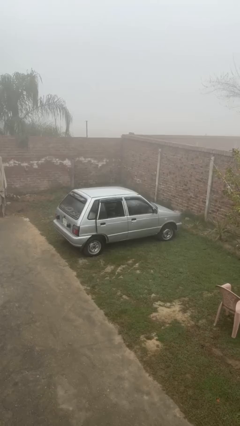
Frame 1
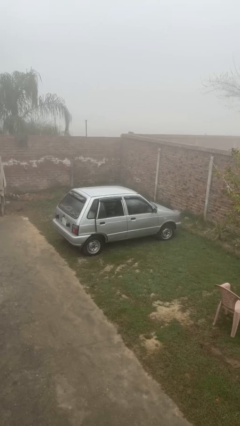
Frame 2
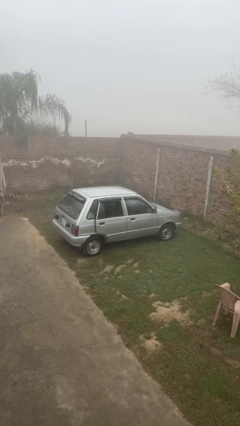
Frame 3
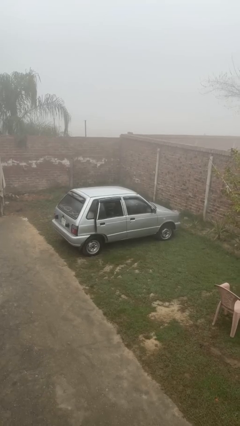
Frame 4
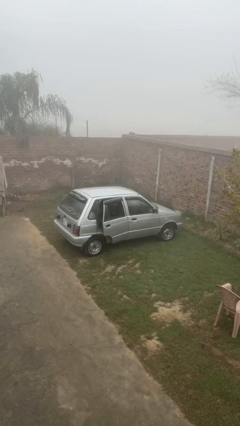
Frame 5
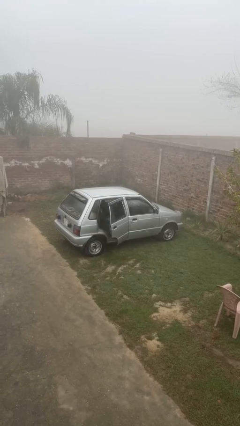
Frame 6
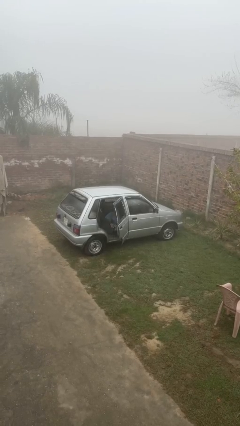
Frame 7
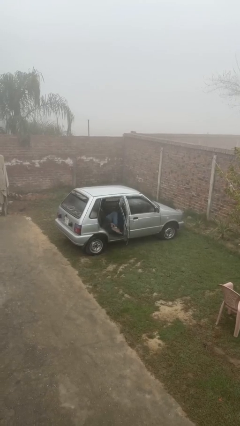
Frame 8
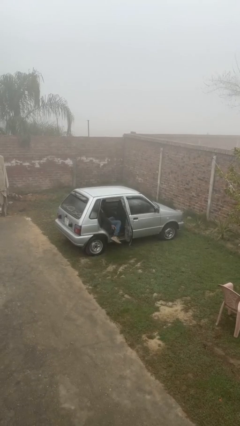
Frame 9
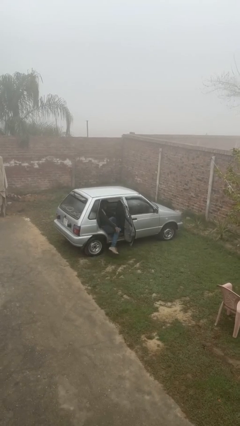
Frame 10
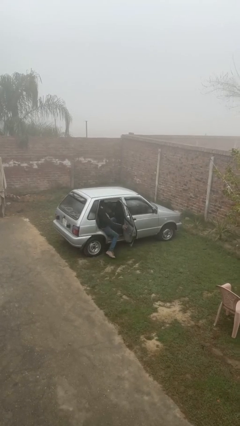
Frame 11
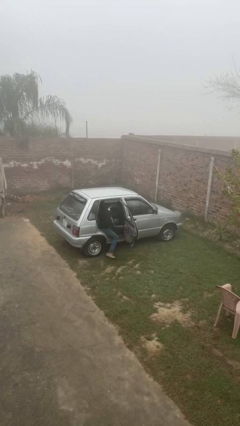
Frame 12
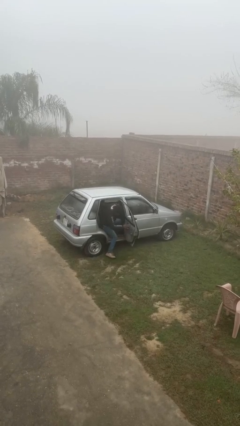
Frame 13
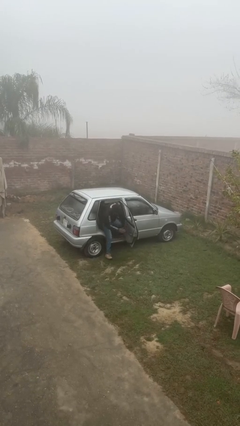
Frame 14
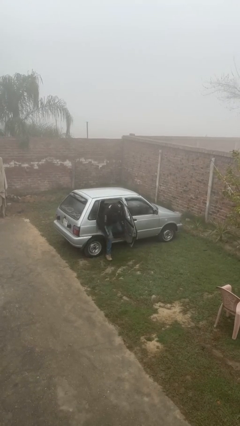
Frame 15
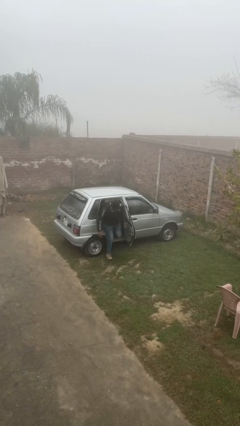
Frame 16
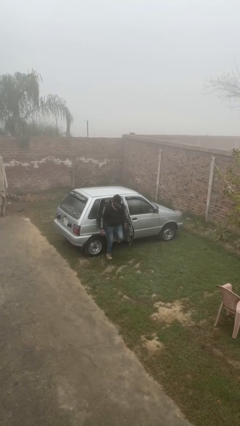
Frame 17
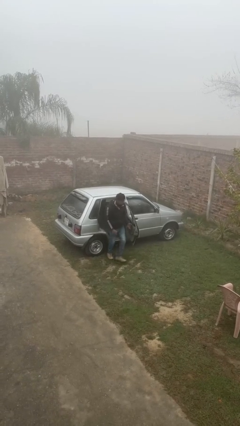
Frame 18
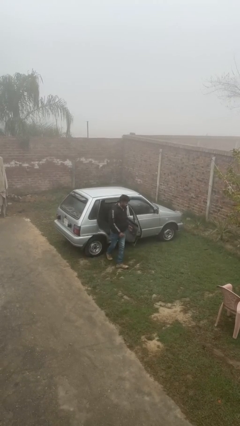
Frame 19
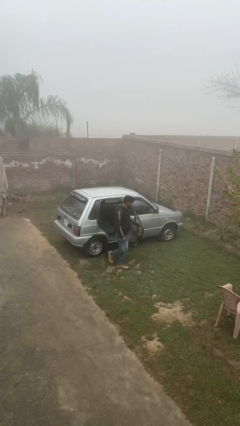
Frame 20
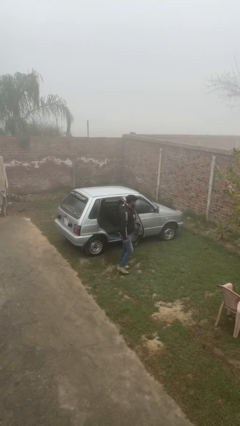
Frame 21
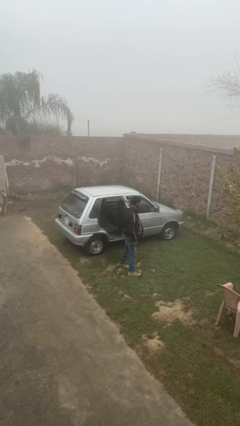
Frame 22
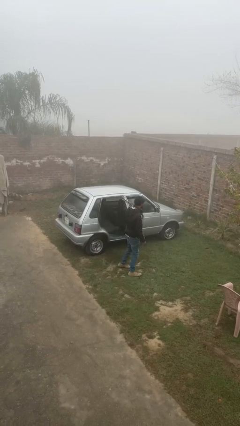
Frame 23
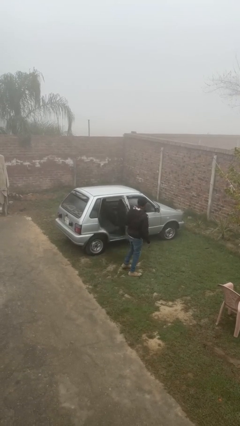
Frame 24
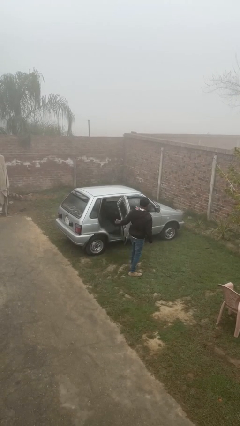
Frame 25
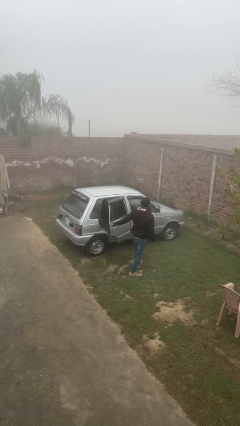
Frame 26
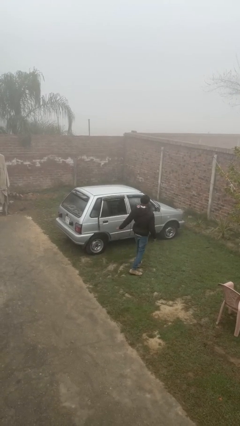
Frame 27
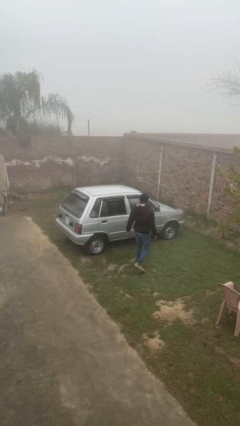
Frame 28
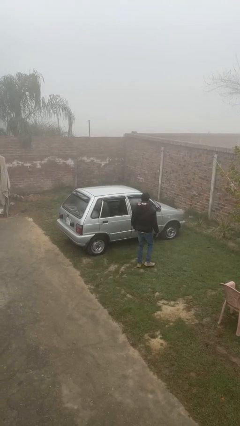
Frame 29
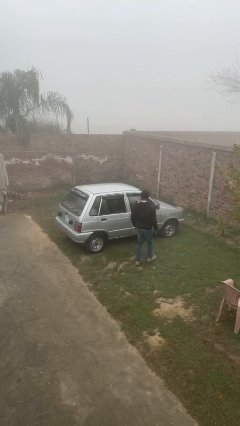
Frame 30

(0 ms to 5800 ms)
car drops off person

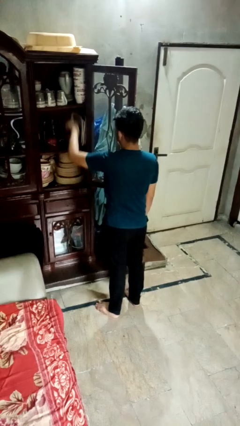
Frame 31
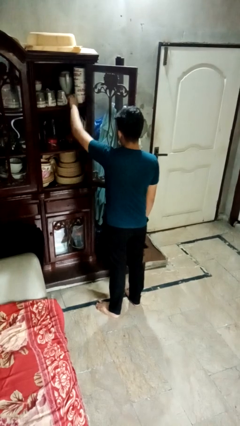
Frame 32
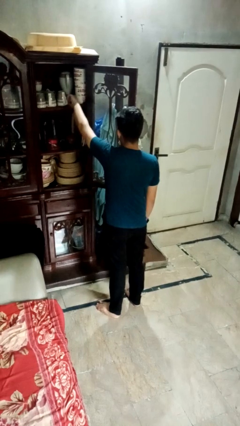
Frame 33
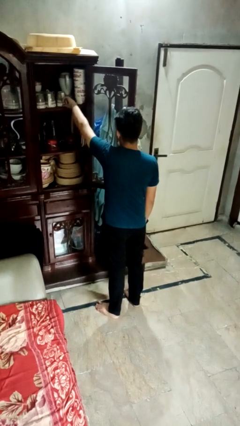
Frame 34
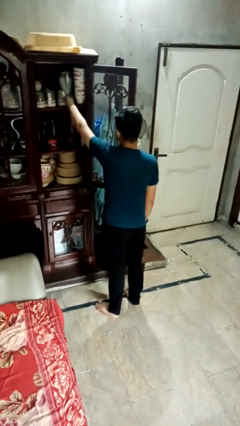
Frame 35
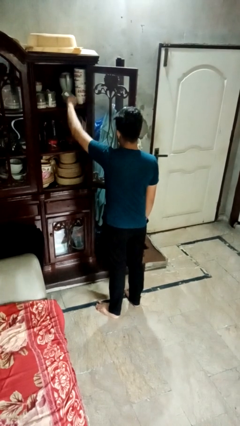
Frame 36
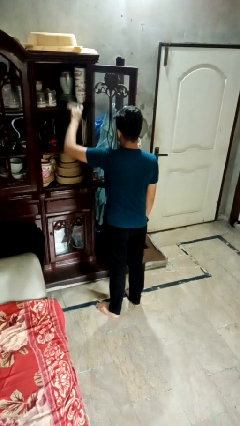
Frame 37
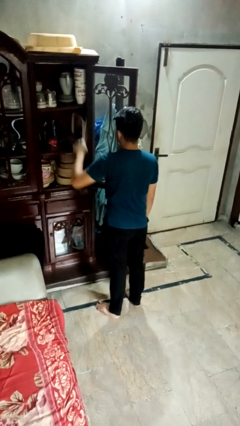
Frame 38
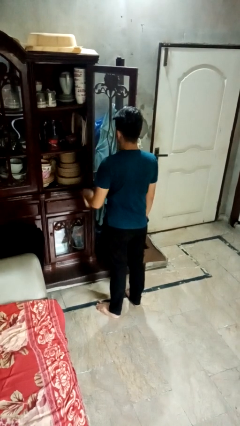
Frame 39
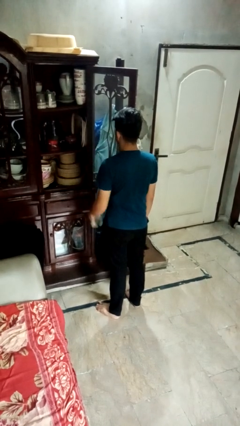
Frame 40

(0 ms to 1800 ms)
person takes object from cabinet

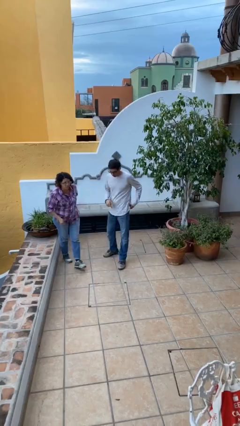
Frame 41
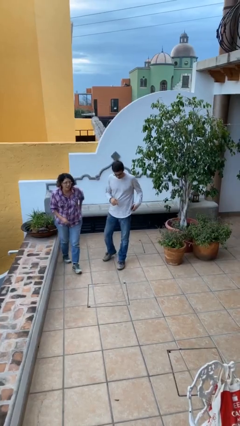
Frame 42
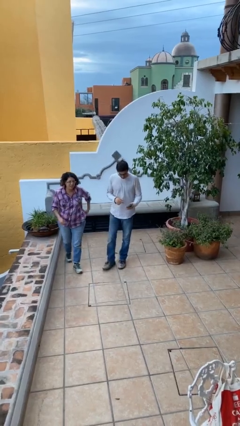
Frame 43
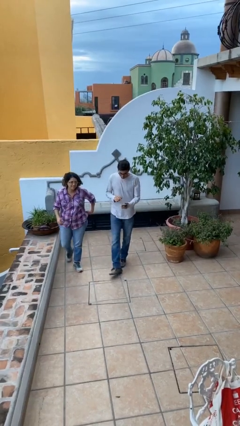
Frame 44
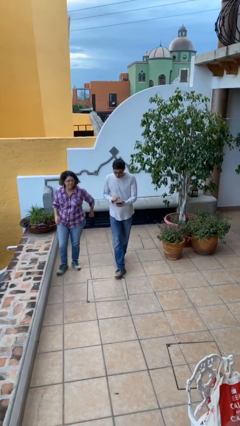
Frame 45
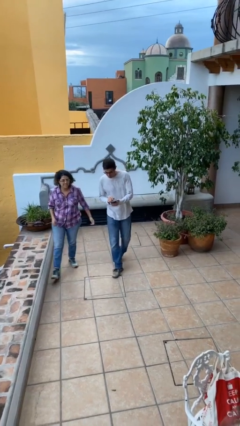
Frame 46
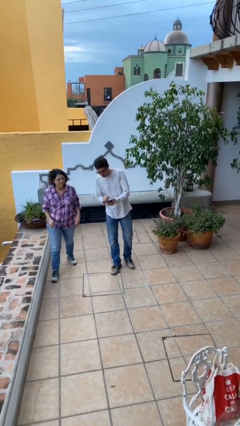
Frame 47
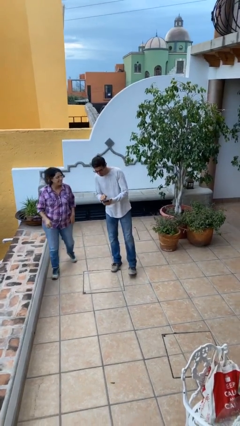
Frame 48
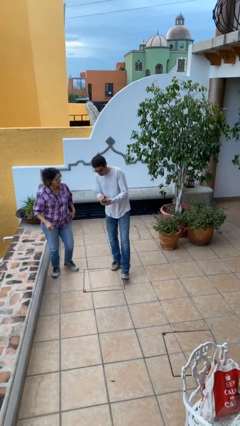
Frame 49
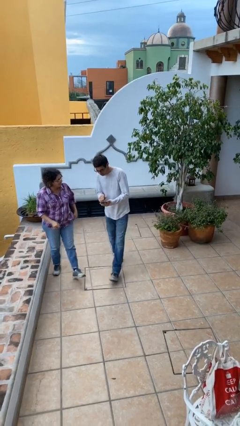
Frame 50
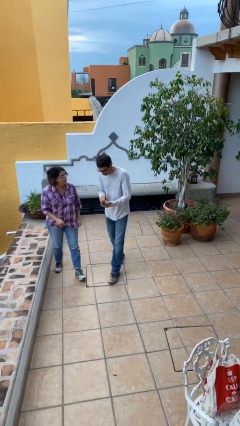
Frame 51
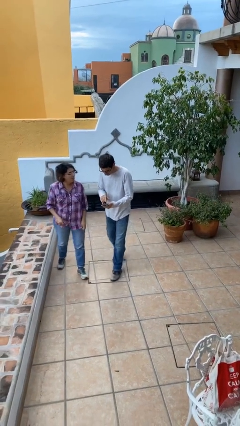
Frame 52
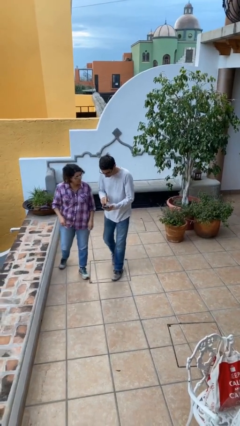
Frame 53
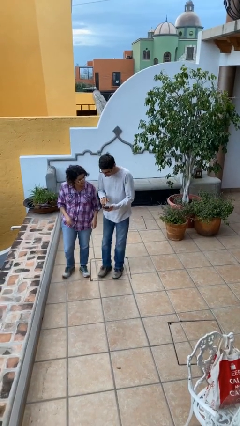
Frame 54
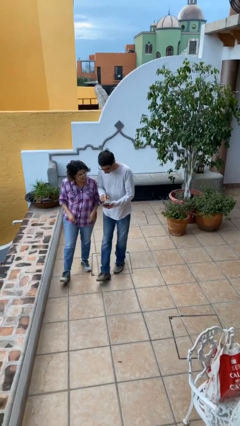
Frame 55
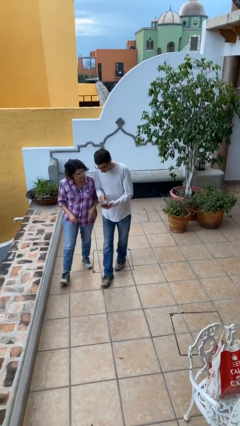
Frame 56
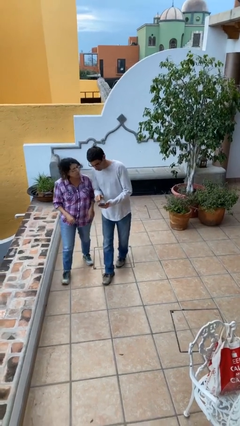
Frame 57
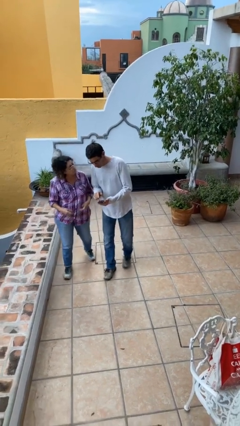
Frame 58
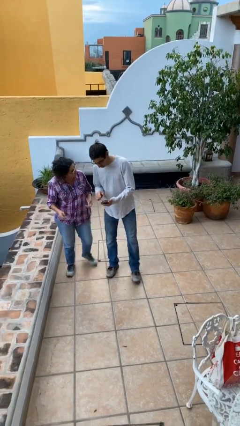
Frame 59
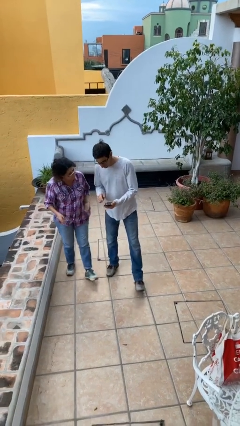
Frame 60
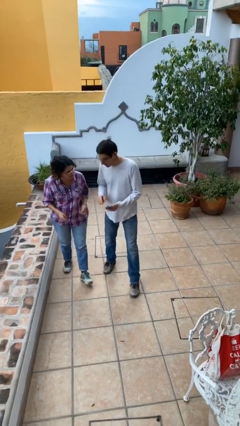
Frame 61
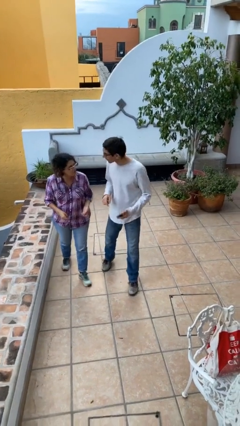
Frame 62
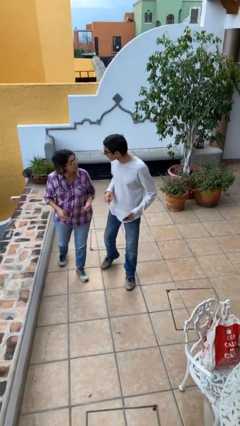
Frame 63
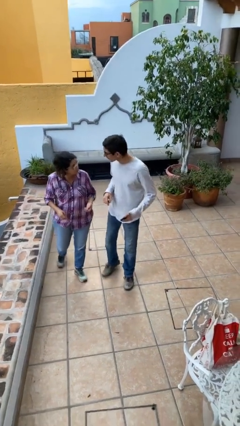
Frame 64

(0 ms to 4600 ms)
person talks to person

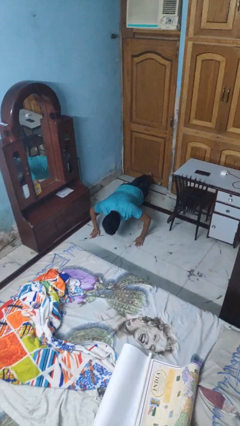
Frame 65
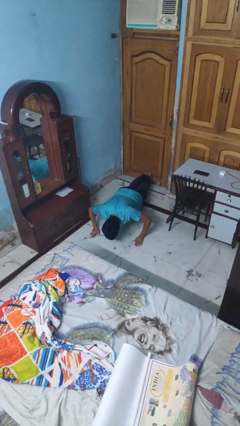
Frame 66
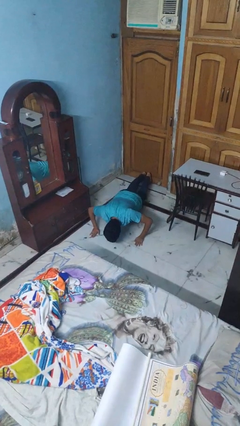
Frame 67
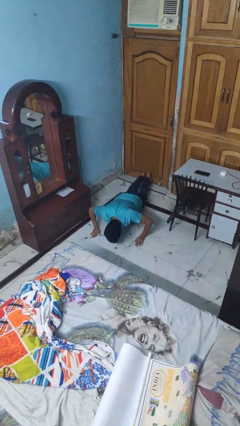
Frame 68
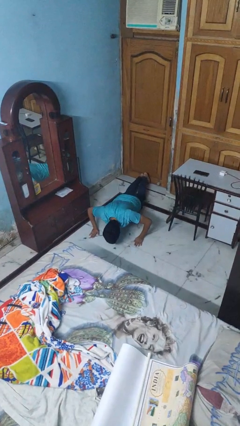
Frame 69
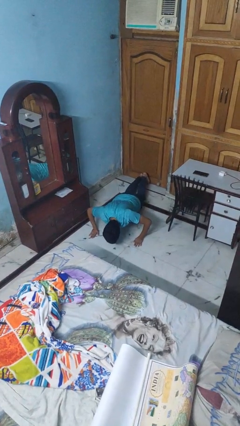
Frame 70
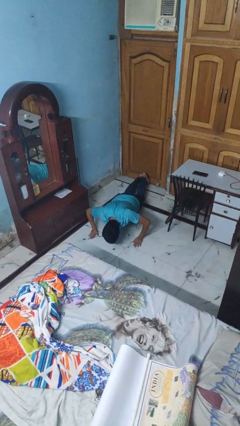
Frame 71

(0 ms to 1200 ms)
person exercises with pushup

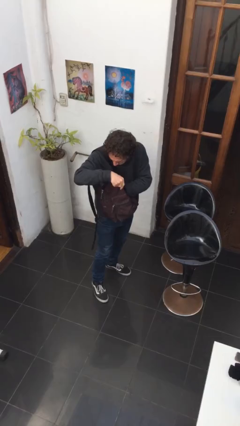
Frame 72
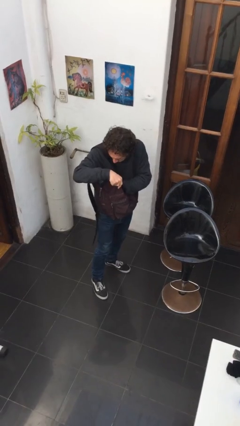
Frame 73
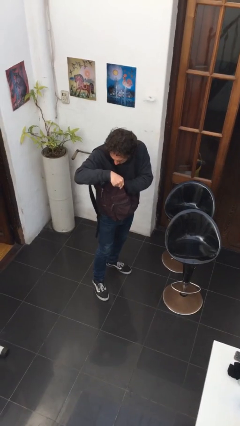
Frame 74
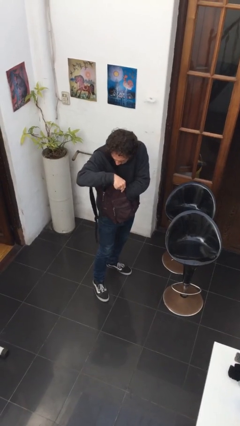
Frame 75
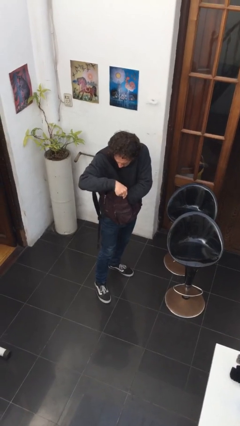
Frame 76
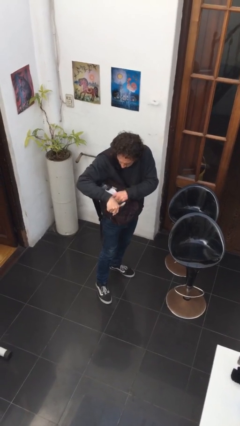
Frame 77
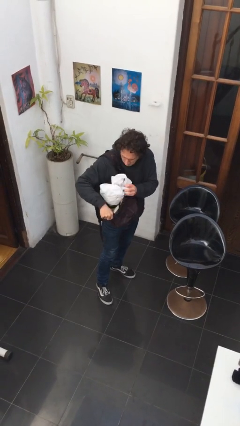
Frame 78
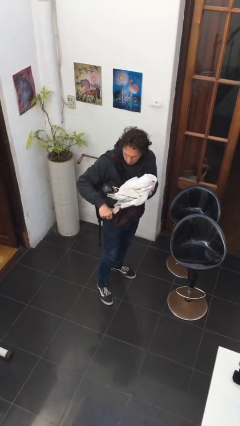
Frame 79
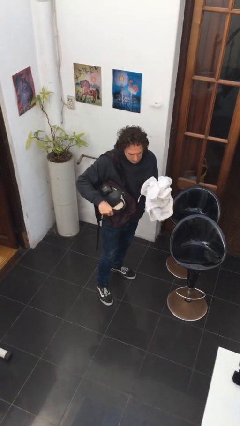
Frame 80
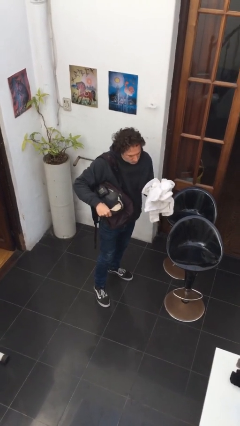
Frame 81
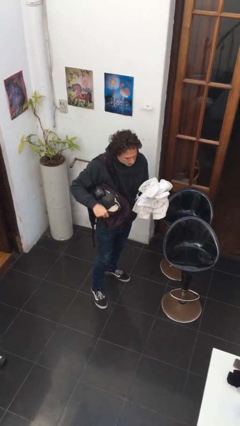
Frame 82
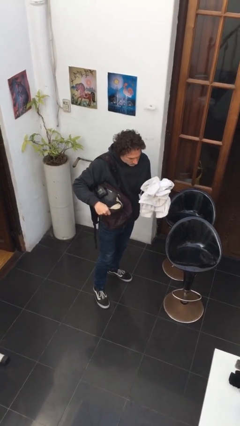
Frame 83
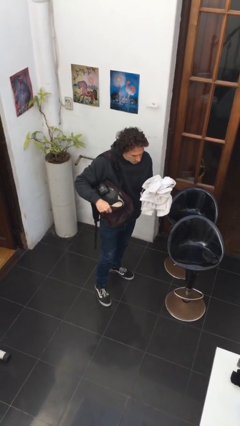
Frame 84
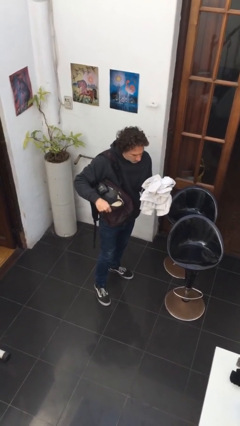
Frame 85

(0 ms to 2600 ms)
person takes object from backpack

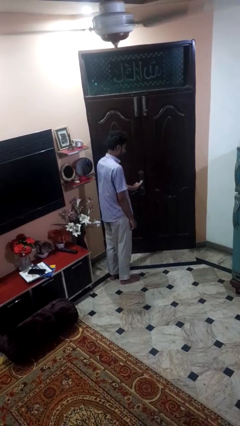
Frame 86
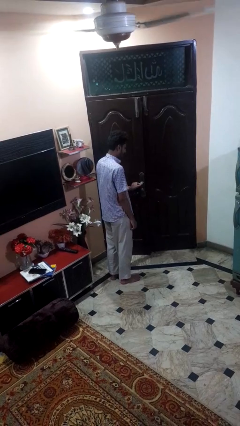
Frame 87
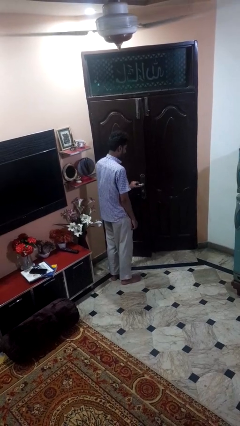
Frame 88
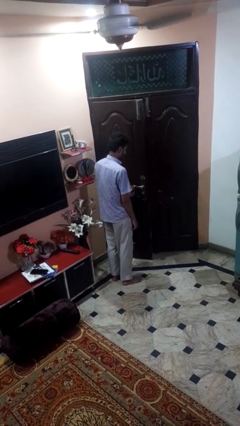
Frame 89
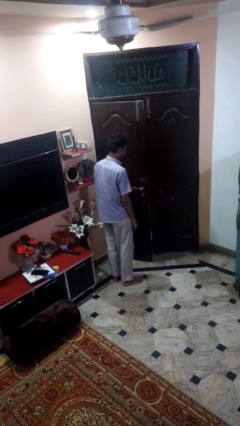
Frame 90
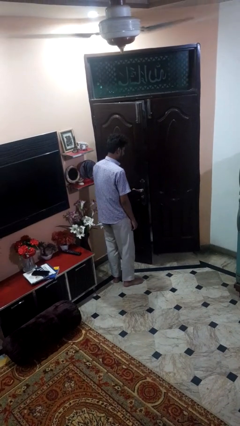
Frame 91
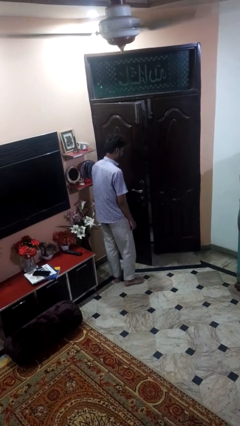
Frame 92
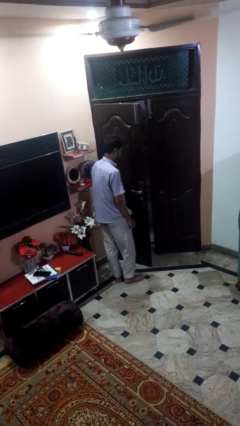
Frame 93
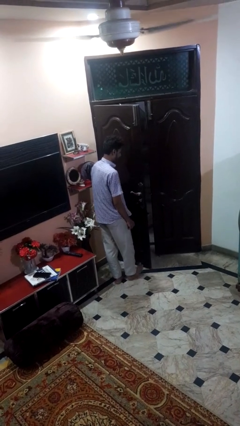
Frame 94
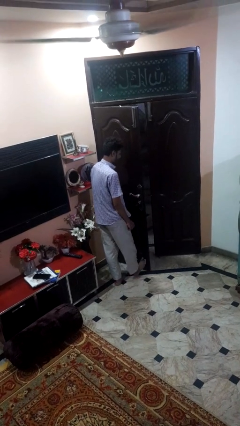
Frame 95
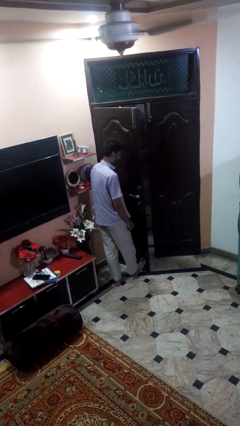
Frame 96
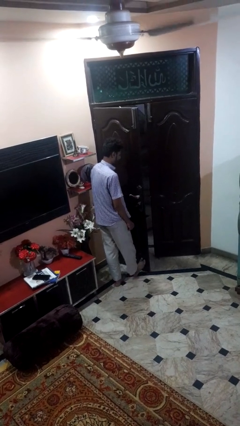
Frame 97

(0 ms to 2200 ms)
person opens facility door
